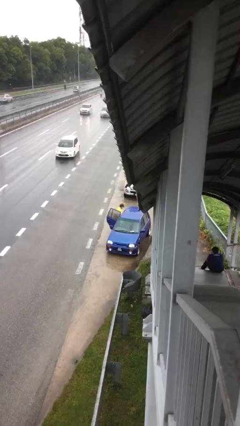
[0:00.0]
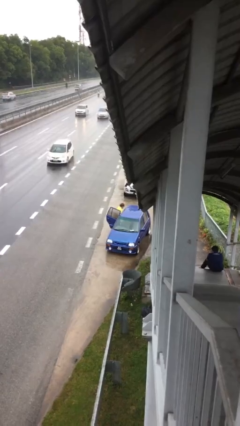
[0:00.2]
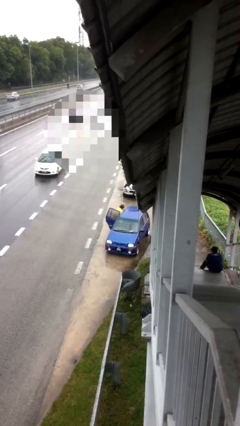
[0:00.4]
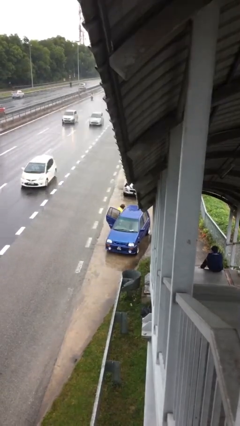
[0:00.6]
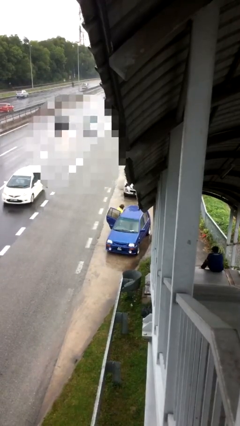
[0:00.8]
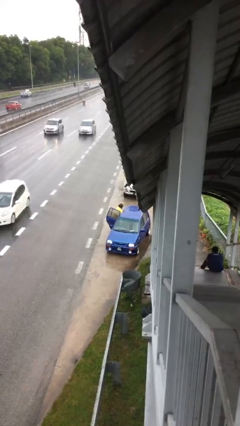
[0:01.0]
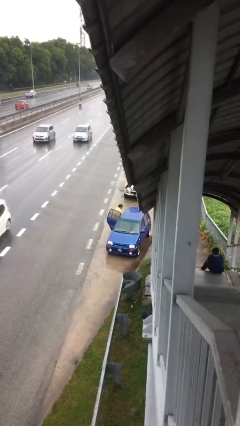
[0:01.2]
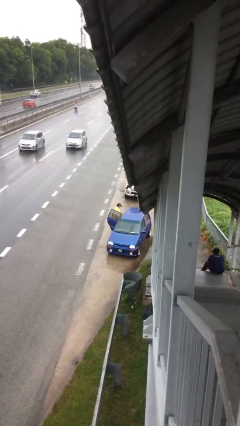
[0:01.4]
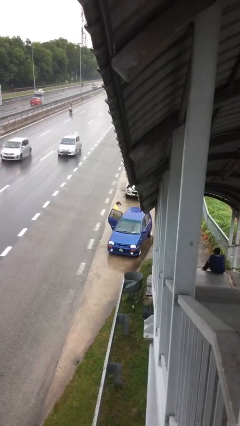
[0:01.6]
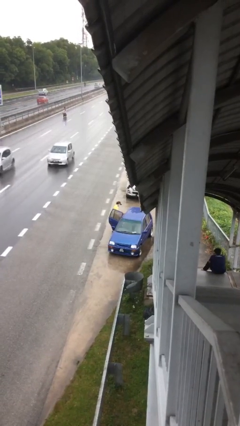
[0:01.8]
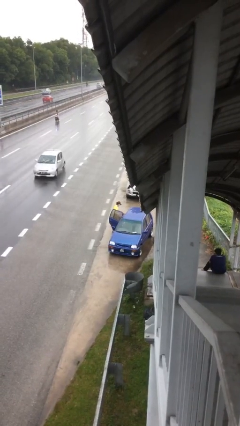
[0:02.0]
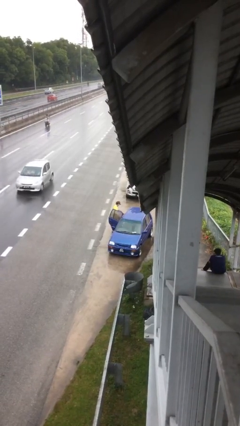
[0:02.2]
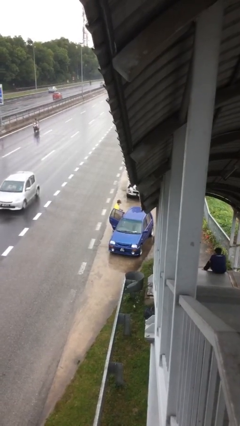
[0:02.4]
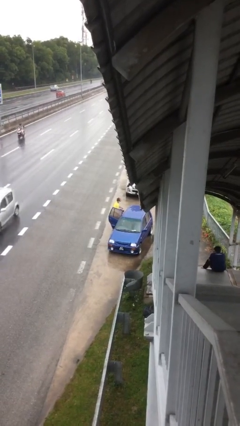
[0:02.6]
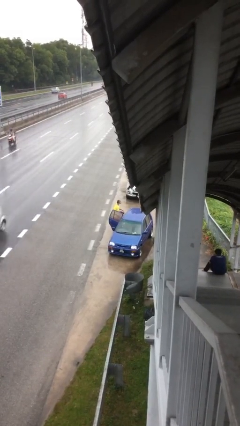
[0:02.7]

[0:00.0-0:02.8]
person unloads car

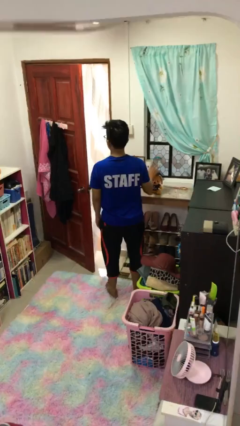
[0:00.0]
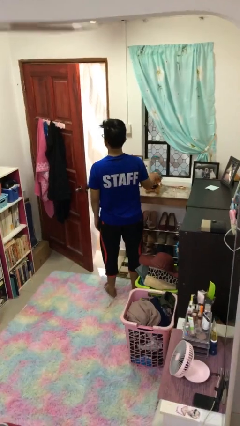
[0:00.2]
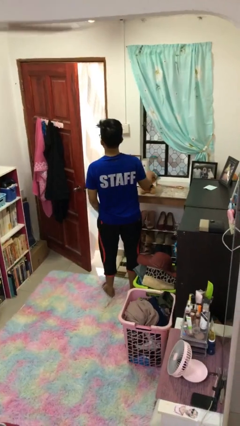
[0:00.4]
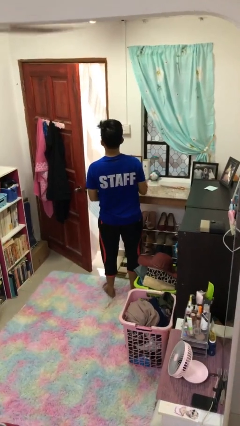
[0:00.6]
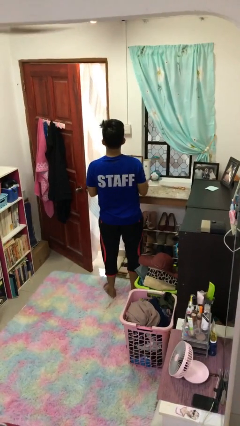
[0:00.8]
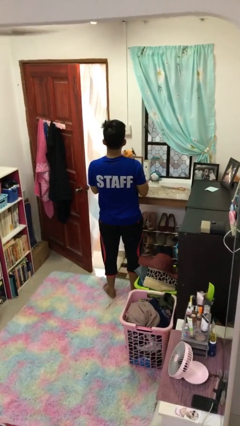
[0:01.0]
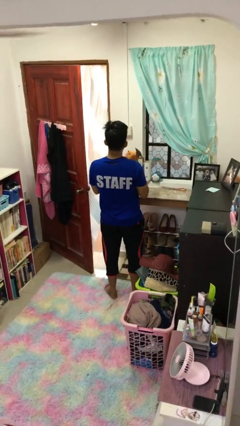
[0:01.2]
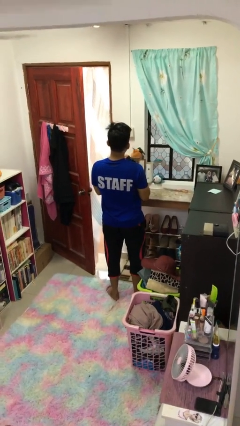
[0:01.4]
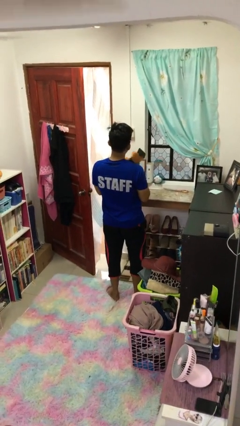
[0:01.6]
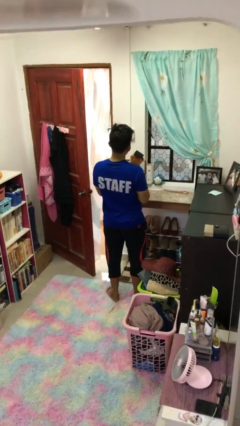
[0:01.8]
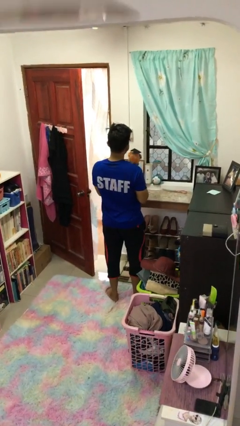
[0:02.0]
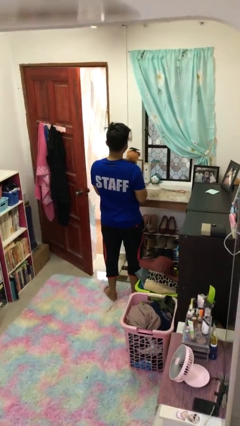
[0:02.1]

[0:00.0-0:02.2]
person picks up object from countertop

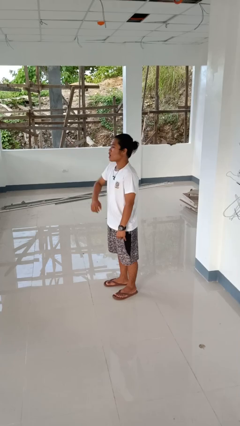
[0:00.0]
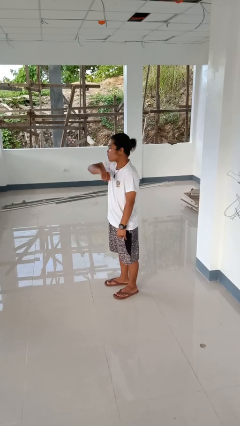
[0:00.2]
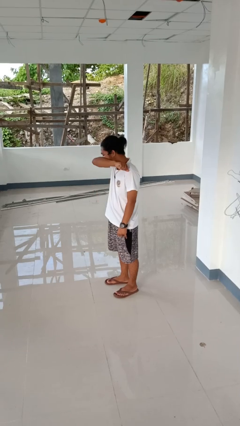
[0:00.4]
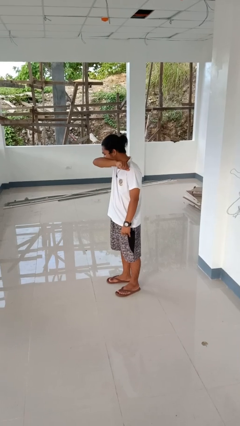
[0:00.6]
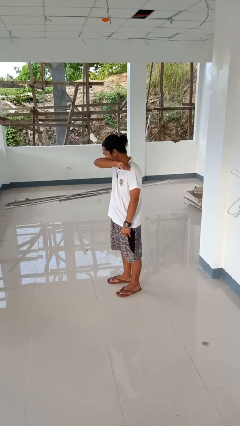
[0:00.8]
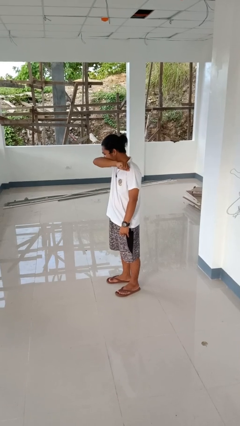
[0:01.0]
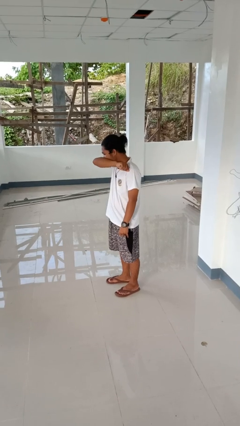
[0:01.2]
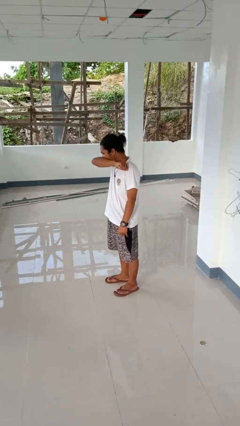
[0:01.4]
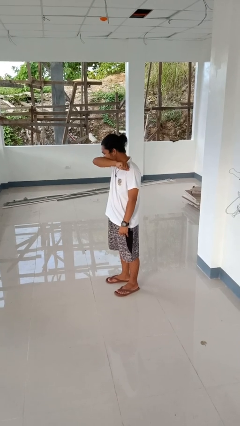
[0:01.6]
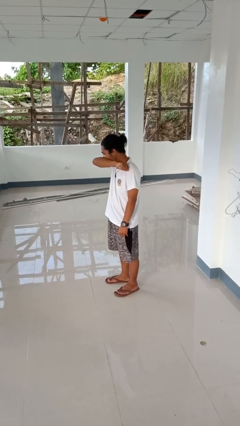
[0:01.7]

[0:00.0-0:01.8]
person sneezes into arm

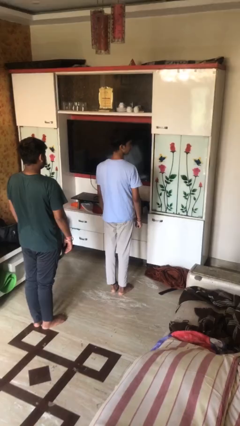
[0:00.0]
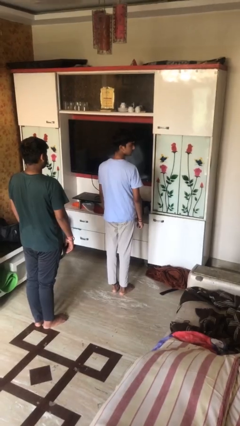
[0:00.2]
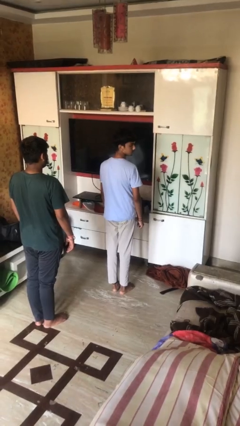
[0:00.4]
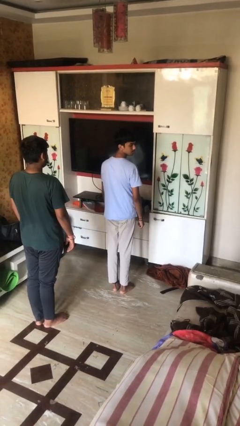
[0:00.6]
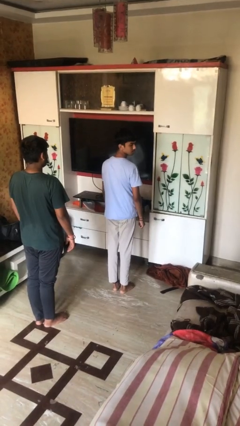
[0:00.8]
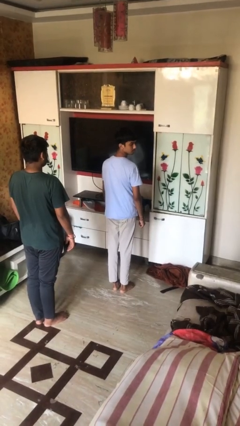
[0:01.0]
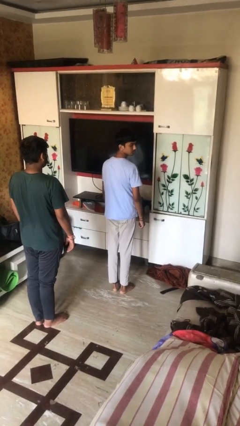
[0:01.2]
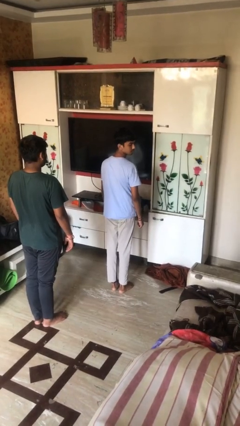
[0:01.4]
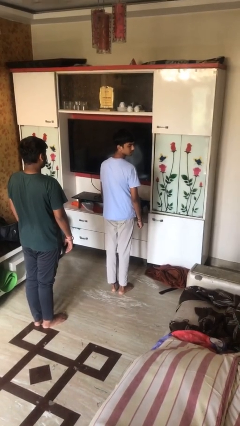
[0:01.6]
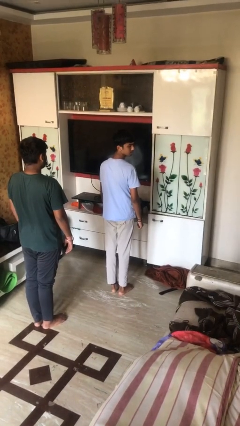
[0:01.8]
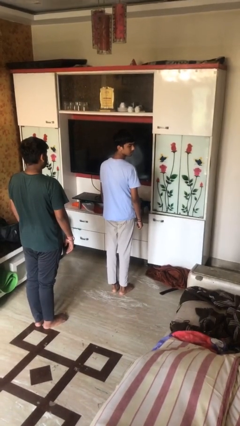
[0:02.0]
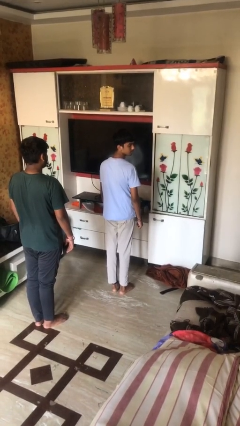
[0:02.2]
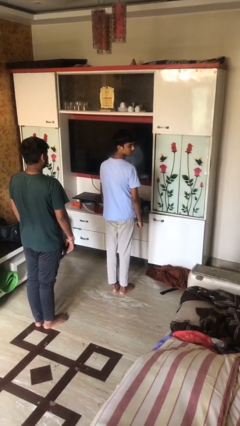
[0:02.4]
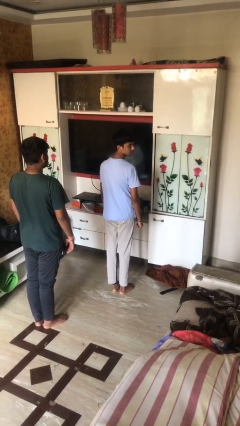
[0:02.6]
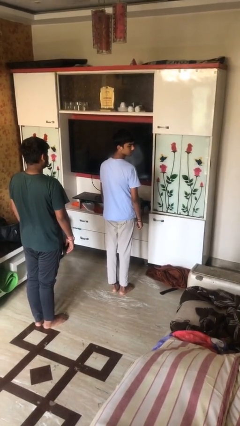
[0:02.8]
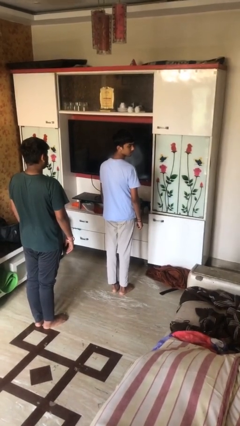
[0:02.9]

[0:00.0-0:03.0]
person looks over shoulder

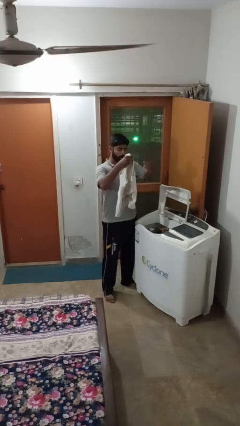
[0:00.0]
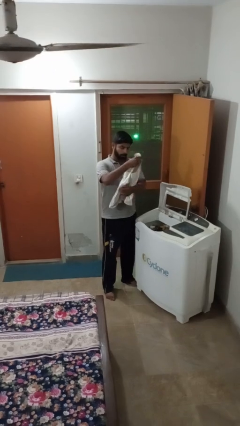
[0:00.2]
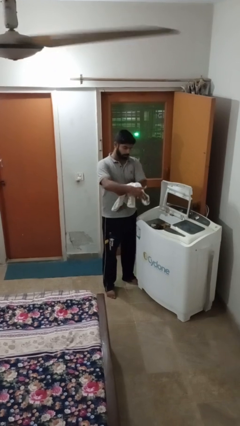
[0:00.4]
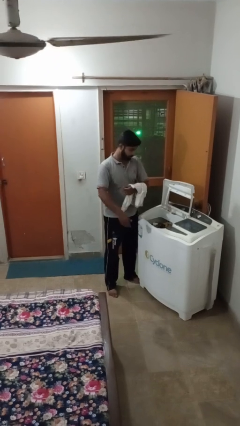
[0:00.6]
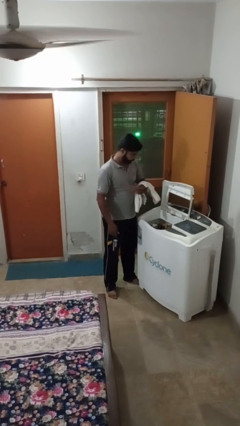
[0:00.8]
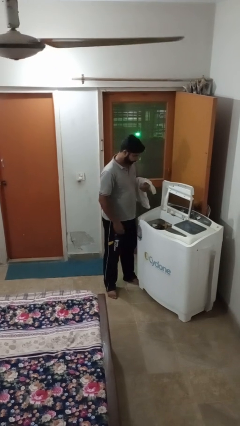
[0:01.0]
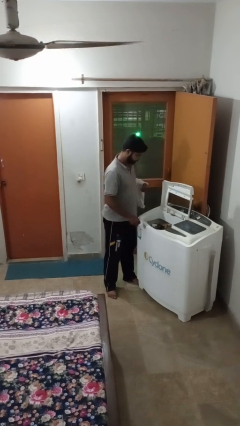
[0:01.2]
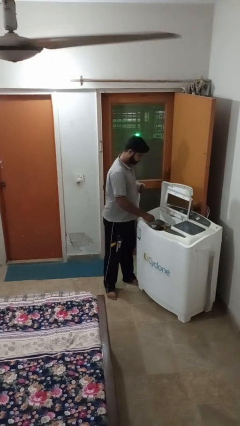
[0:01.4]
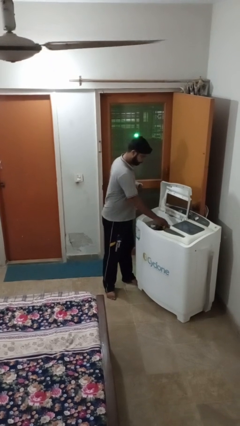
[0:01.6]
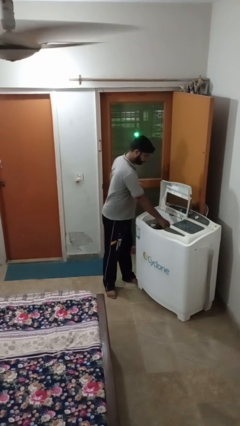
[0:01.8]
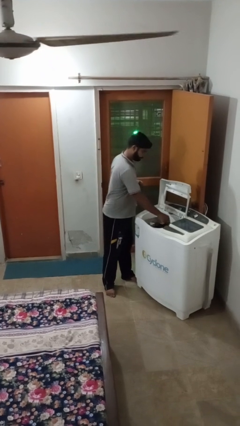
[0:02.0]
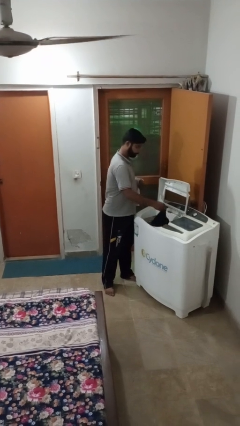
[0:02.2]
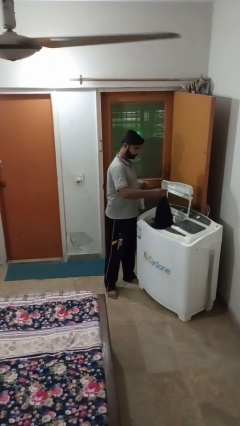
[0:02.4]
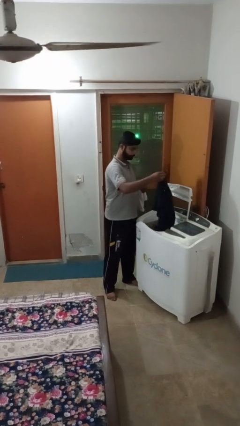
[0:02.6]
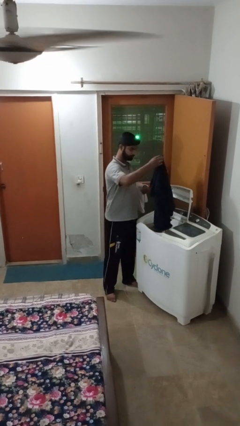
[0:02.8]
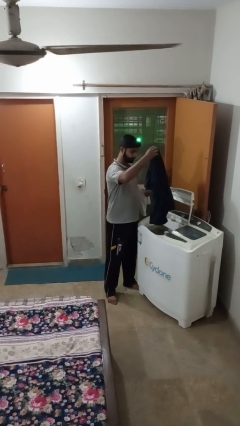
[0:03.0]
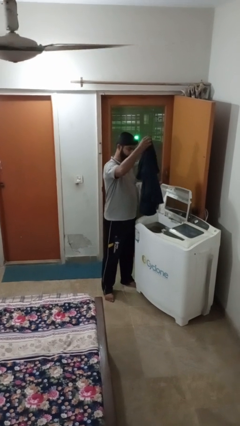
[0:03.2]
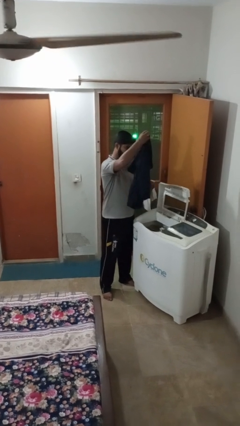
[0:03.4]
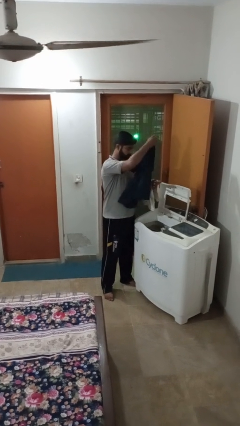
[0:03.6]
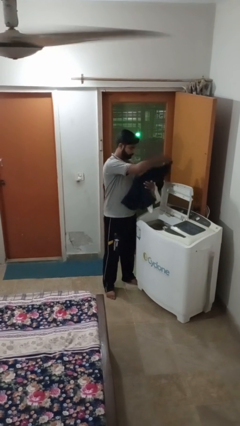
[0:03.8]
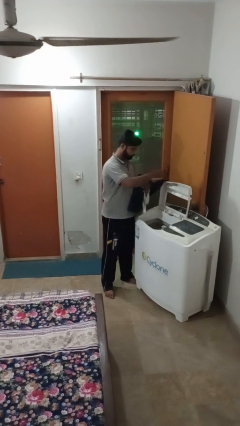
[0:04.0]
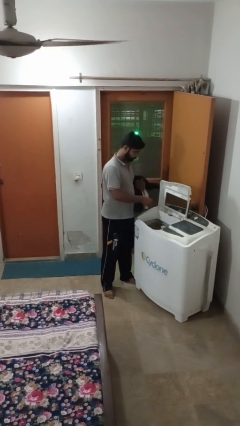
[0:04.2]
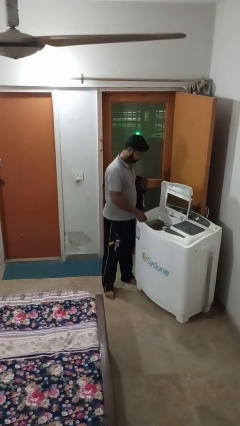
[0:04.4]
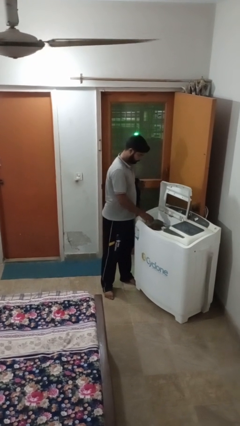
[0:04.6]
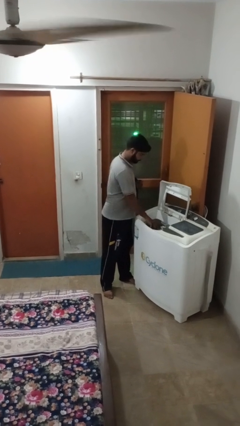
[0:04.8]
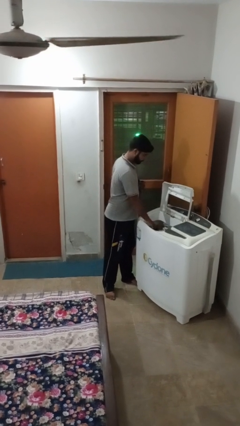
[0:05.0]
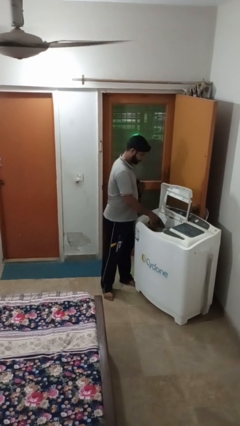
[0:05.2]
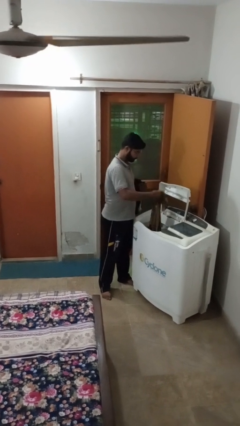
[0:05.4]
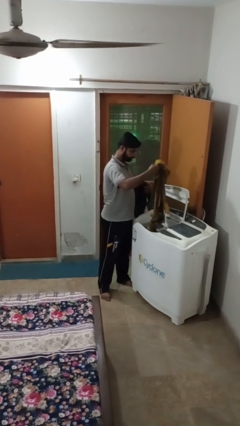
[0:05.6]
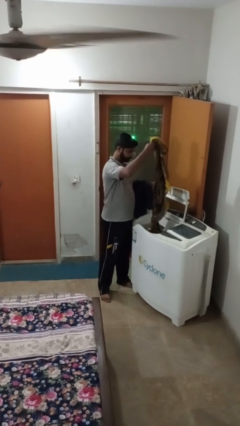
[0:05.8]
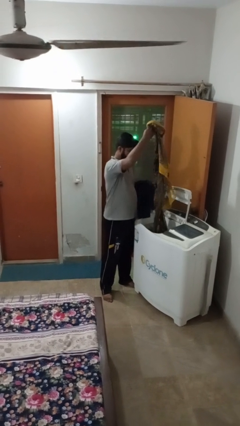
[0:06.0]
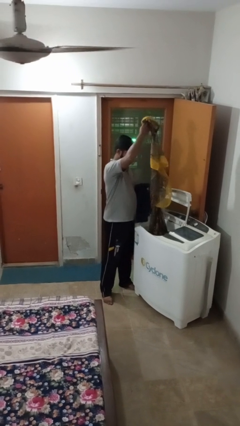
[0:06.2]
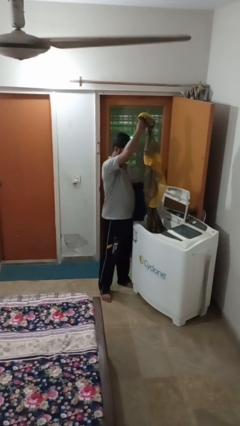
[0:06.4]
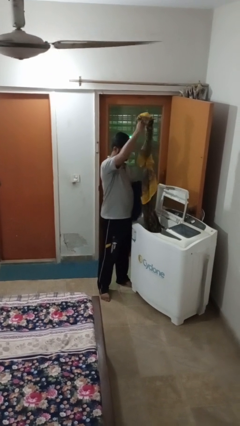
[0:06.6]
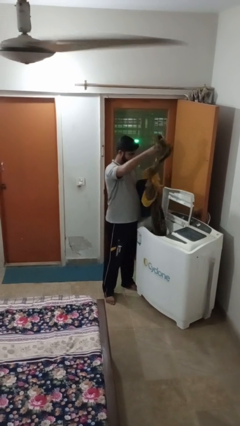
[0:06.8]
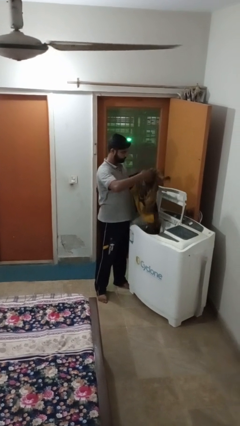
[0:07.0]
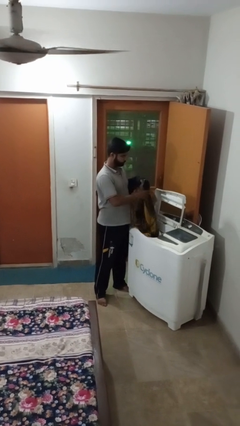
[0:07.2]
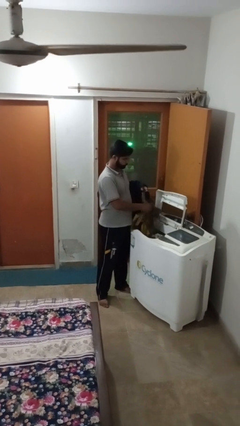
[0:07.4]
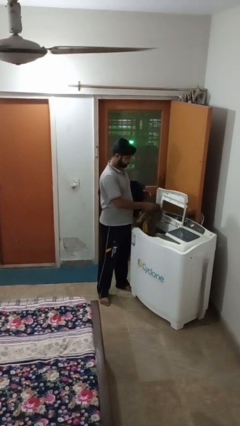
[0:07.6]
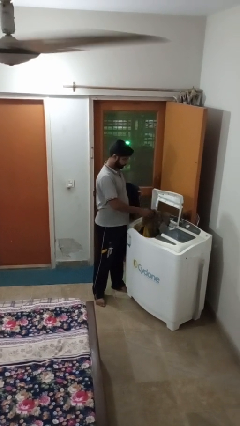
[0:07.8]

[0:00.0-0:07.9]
person unloads clotheswasher
